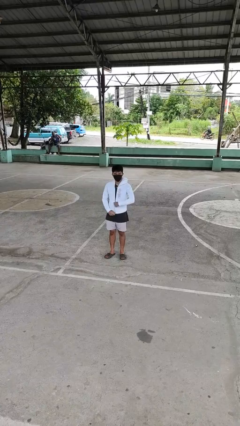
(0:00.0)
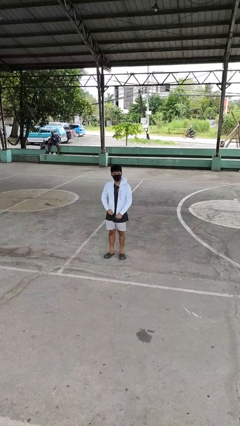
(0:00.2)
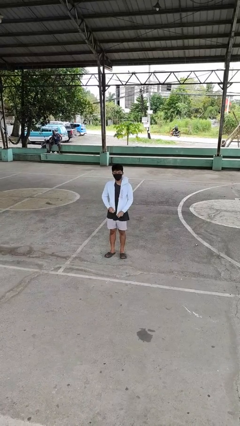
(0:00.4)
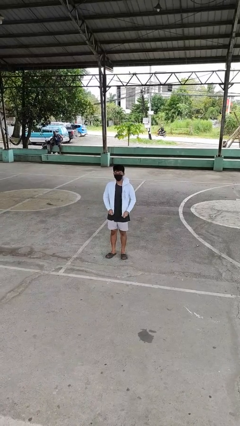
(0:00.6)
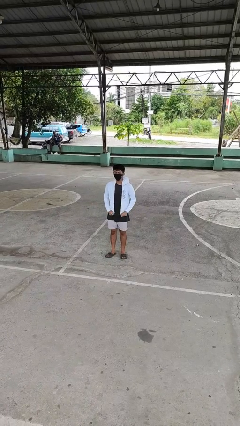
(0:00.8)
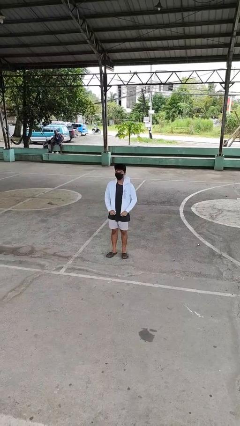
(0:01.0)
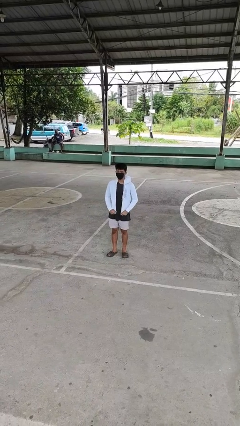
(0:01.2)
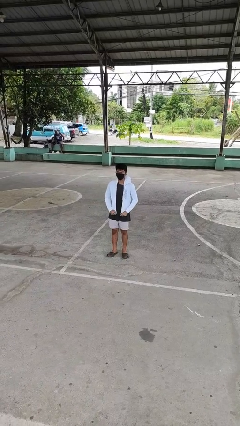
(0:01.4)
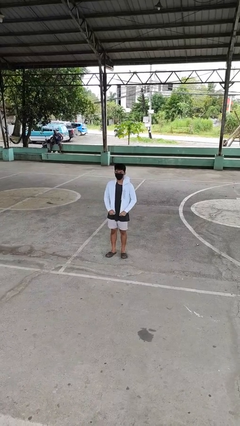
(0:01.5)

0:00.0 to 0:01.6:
person unzips jacket

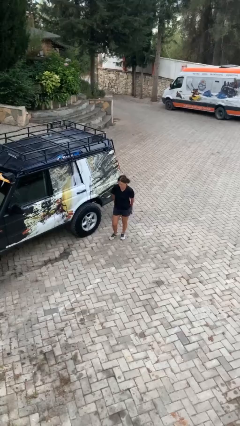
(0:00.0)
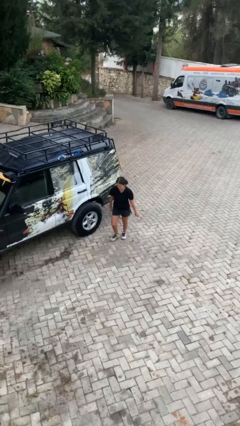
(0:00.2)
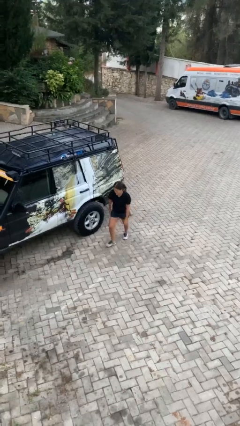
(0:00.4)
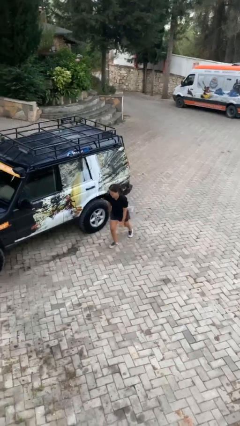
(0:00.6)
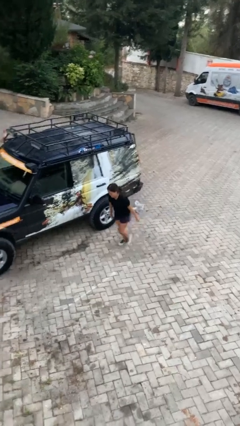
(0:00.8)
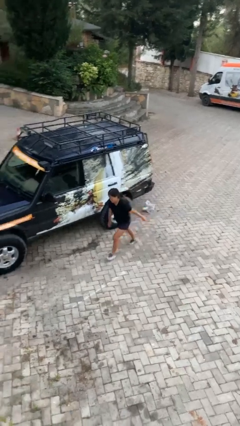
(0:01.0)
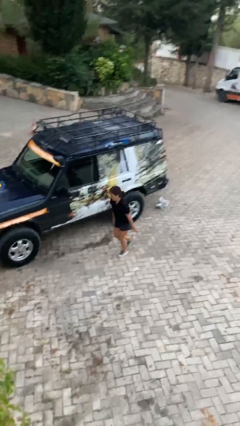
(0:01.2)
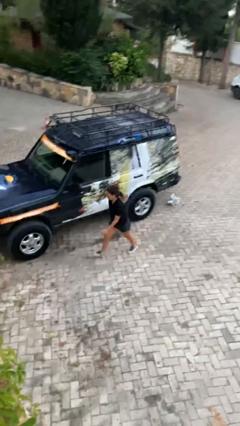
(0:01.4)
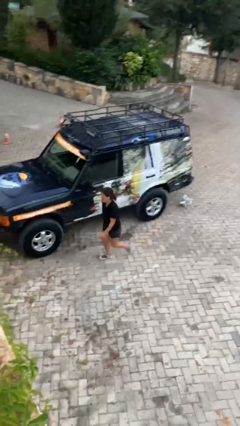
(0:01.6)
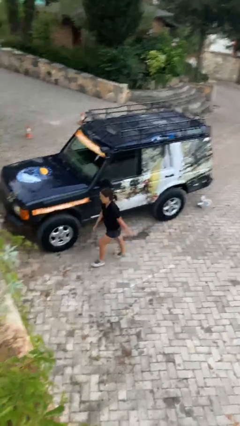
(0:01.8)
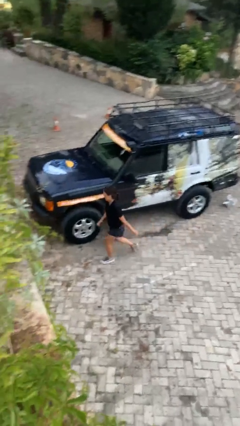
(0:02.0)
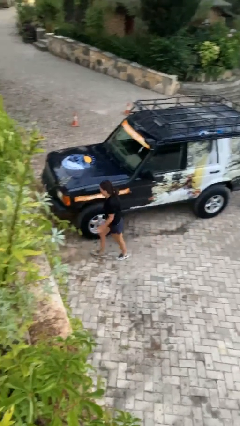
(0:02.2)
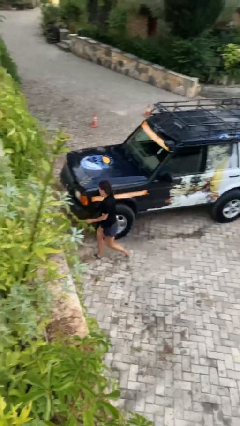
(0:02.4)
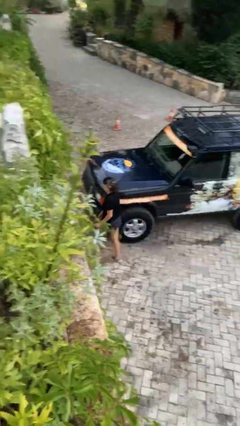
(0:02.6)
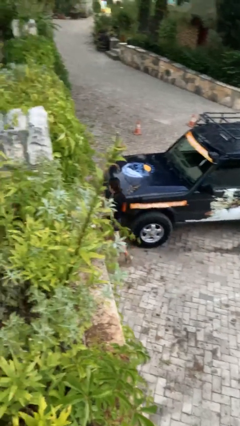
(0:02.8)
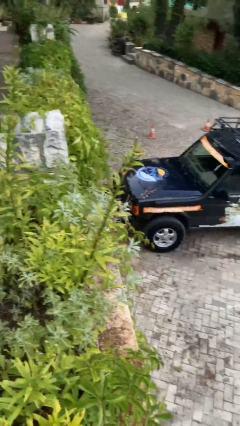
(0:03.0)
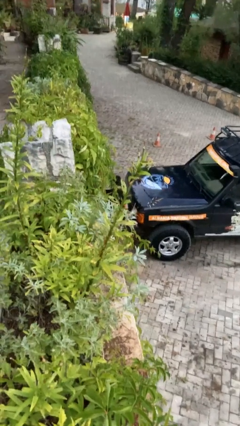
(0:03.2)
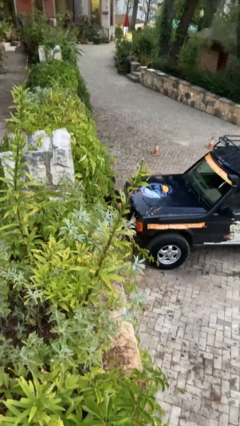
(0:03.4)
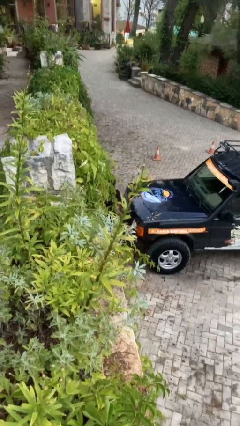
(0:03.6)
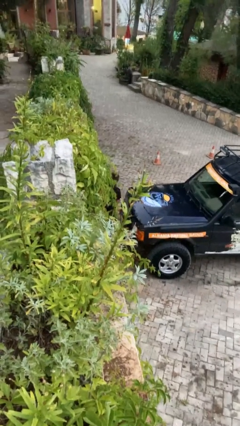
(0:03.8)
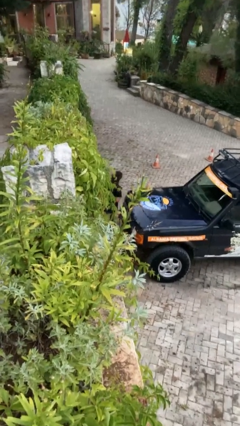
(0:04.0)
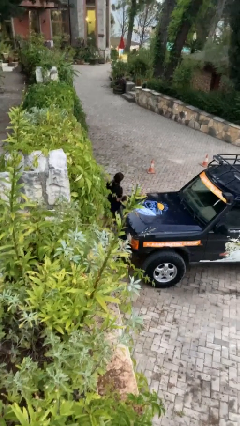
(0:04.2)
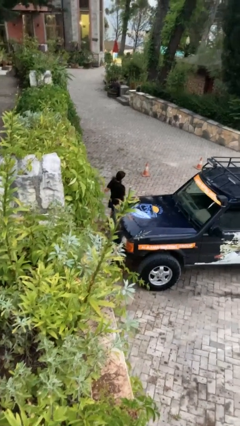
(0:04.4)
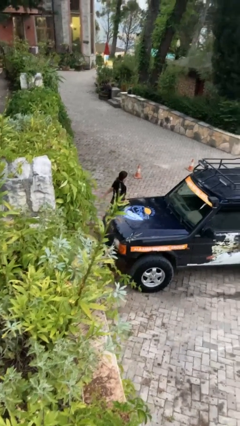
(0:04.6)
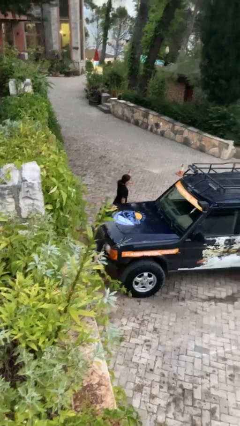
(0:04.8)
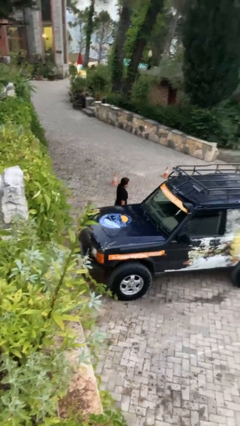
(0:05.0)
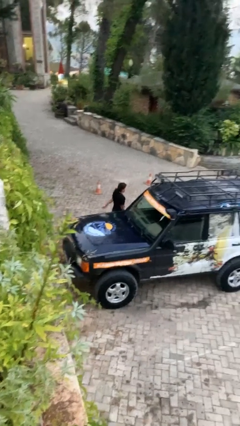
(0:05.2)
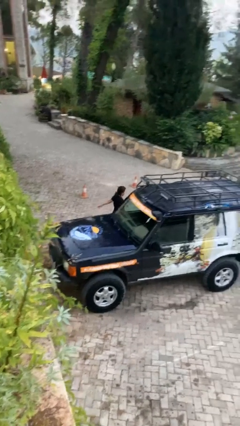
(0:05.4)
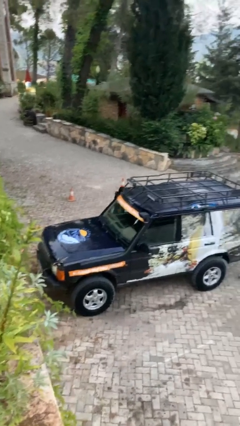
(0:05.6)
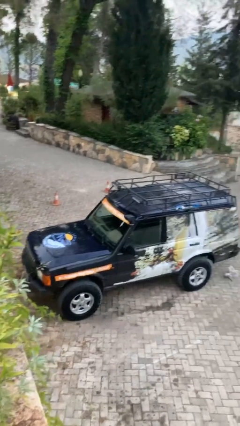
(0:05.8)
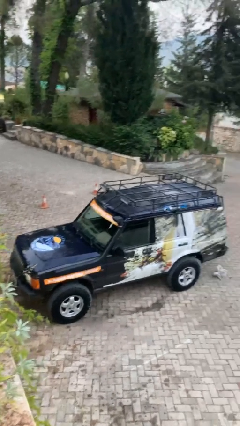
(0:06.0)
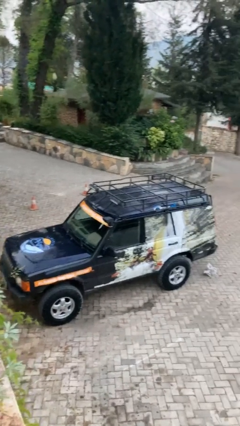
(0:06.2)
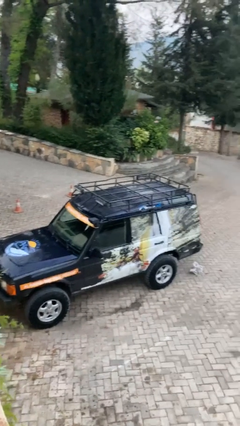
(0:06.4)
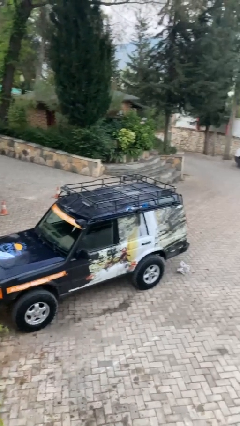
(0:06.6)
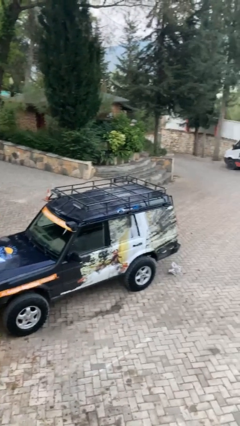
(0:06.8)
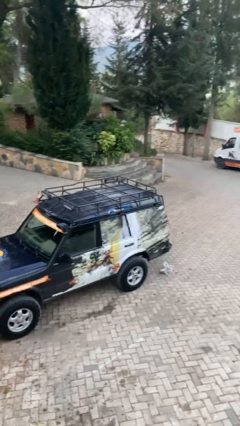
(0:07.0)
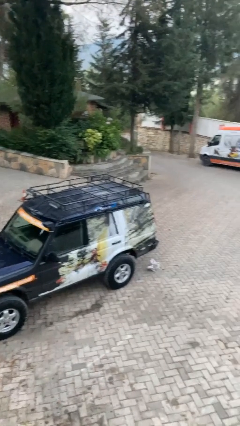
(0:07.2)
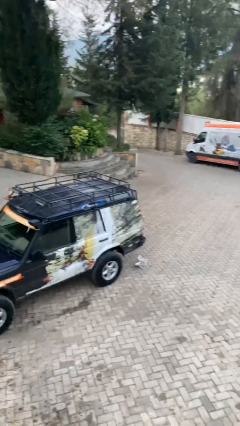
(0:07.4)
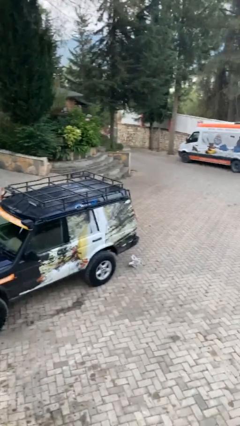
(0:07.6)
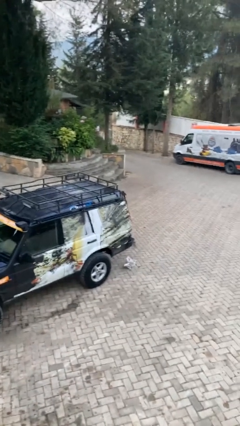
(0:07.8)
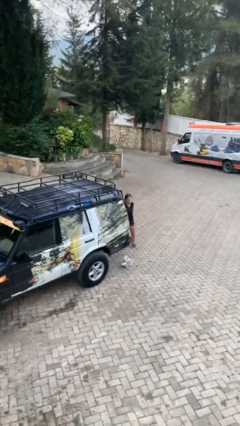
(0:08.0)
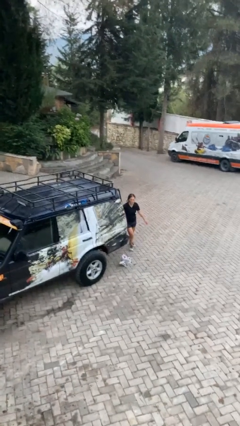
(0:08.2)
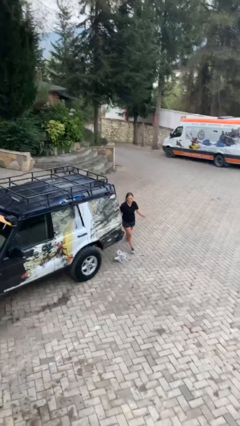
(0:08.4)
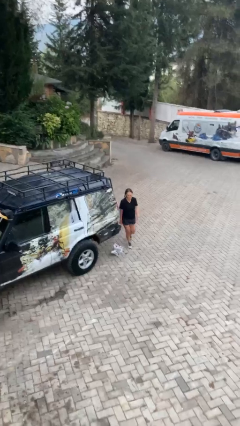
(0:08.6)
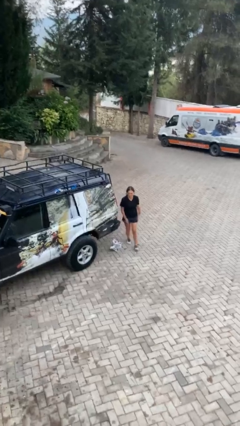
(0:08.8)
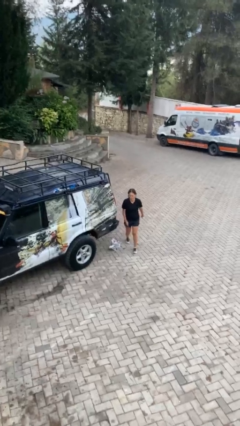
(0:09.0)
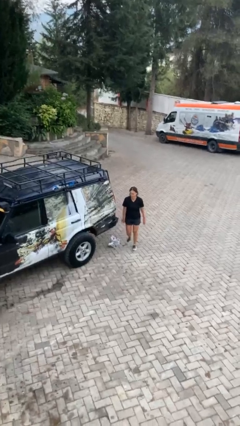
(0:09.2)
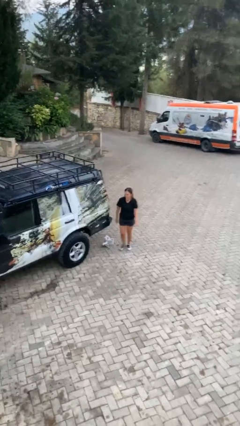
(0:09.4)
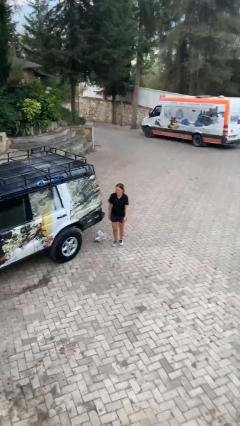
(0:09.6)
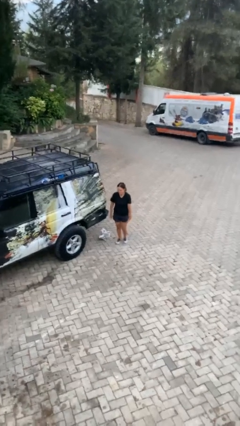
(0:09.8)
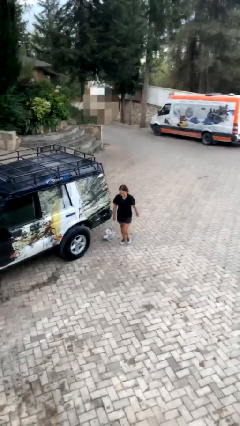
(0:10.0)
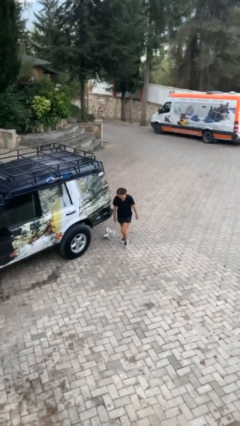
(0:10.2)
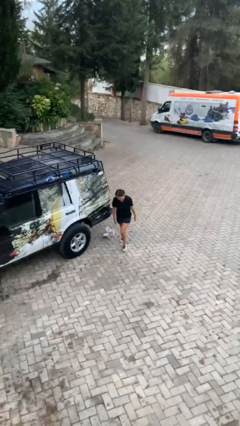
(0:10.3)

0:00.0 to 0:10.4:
person walks around car

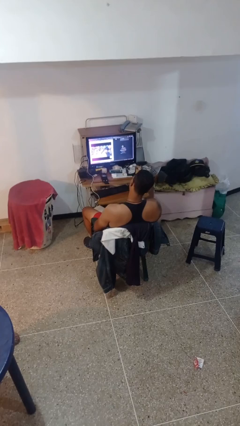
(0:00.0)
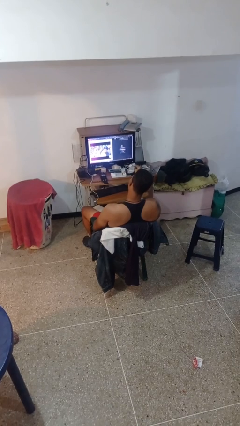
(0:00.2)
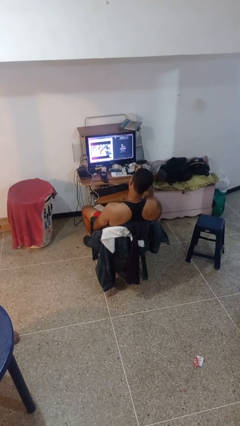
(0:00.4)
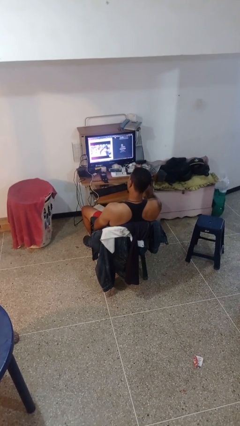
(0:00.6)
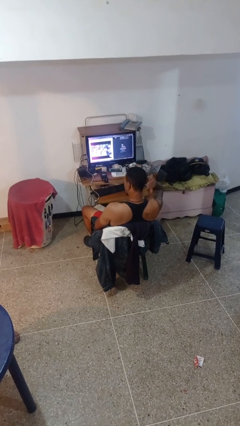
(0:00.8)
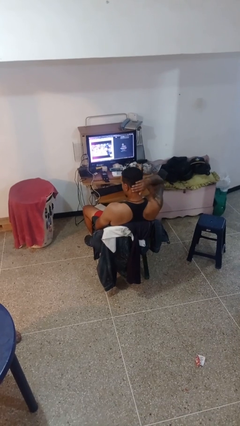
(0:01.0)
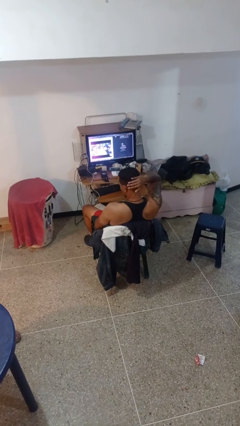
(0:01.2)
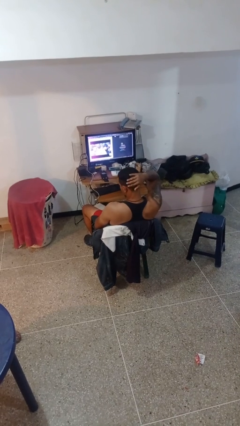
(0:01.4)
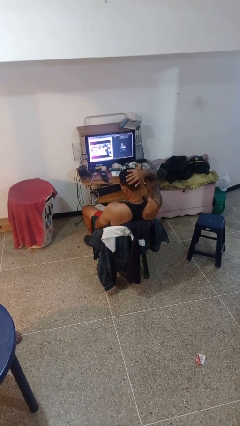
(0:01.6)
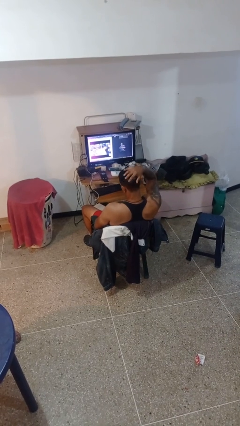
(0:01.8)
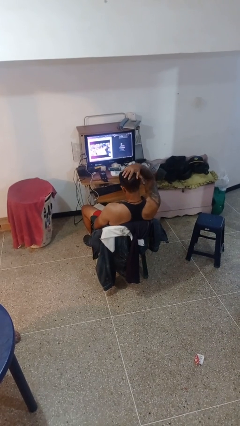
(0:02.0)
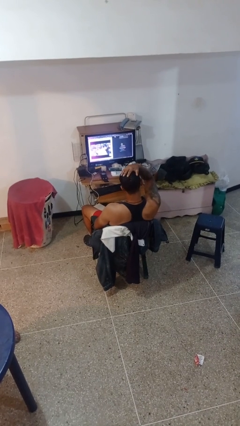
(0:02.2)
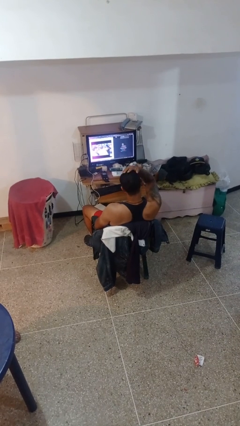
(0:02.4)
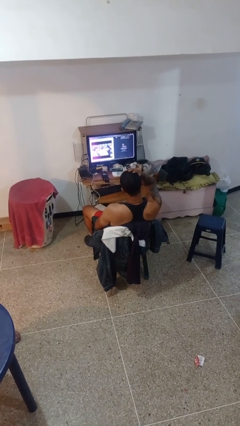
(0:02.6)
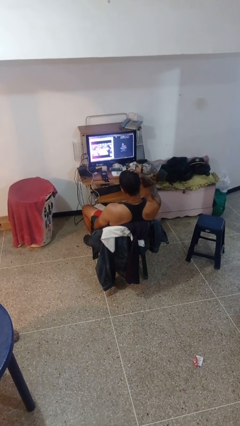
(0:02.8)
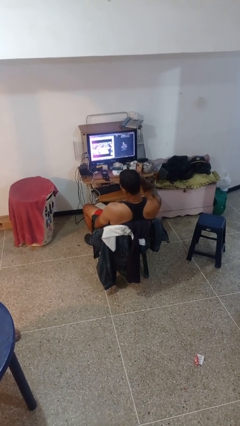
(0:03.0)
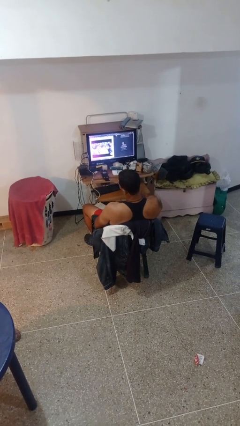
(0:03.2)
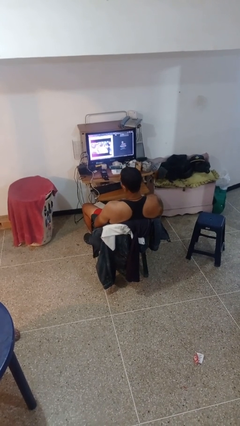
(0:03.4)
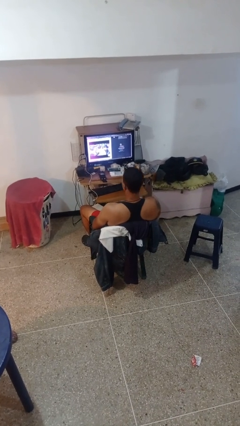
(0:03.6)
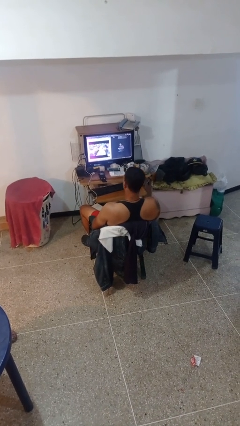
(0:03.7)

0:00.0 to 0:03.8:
person pats head

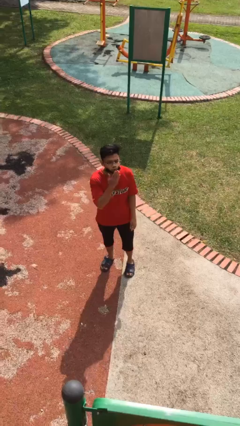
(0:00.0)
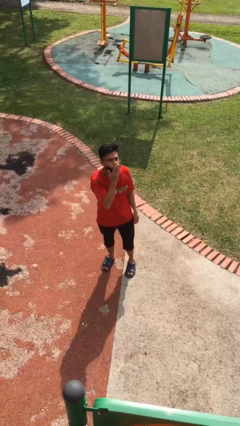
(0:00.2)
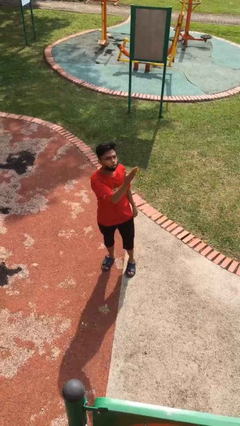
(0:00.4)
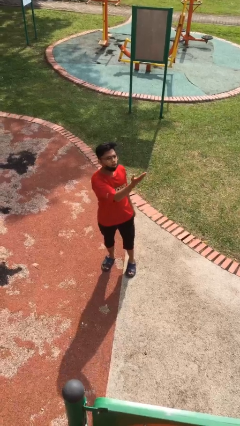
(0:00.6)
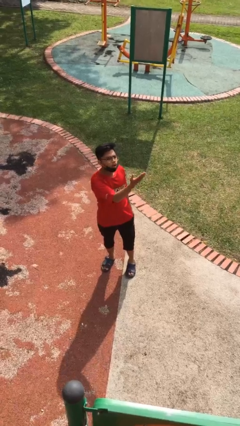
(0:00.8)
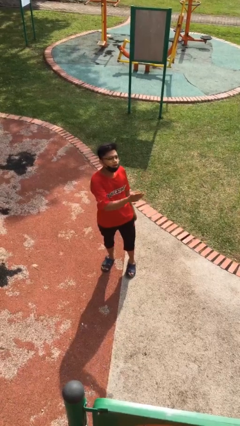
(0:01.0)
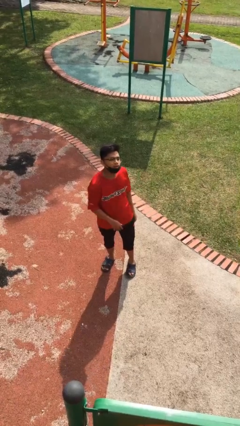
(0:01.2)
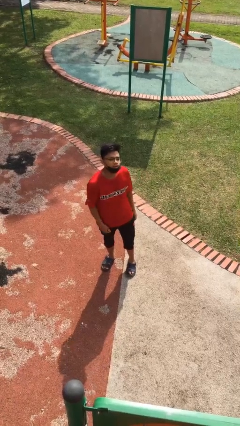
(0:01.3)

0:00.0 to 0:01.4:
person gestures blow kiss
